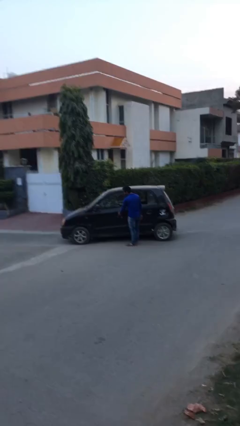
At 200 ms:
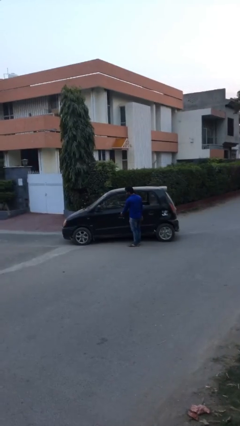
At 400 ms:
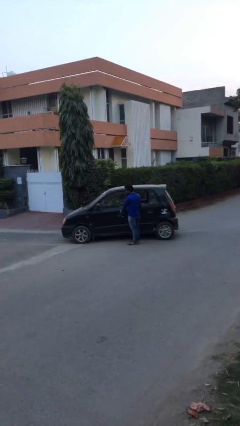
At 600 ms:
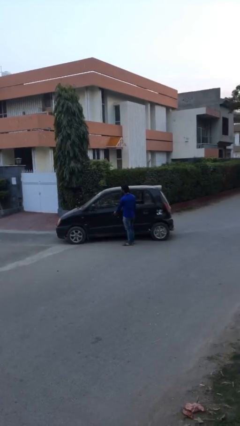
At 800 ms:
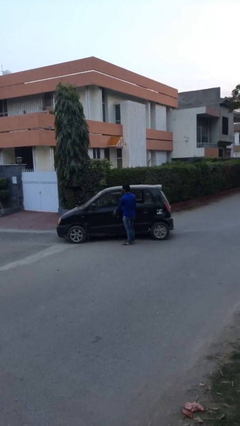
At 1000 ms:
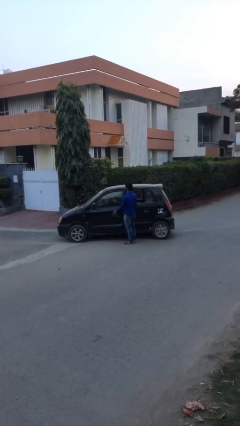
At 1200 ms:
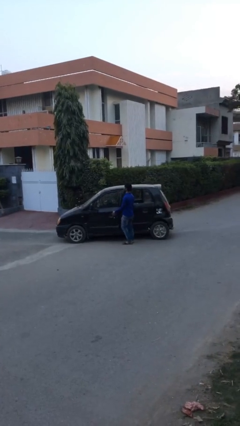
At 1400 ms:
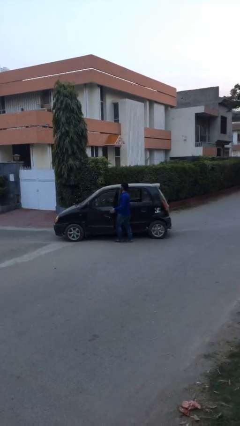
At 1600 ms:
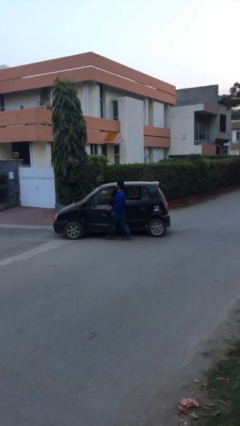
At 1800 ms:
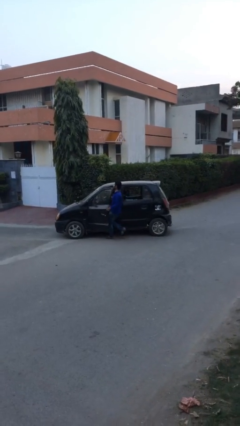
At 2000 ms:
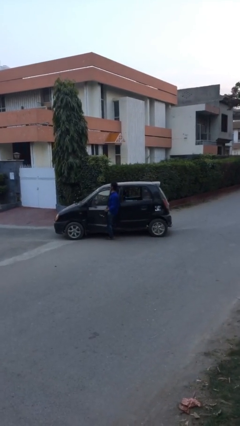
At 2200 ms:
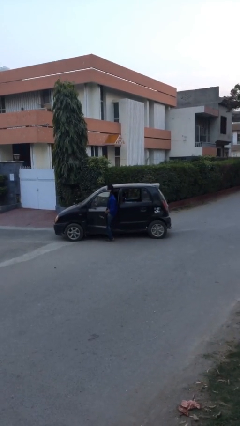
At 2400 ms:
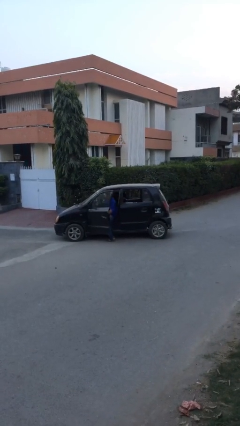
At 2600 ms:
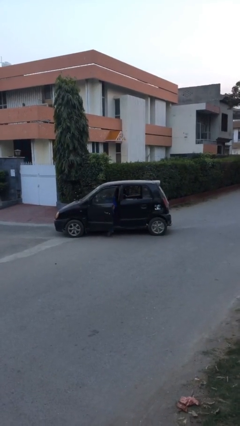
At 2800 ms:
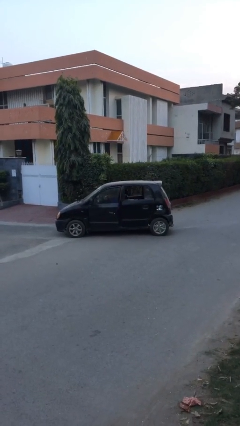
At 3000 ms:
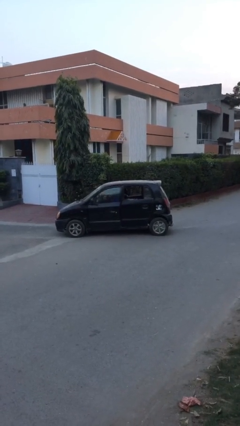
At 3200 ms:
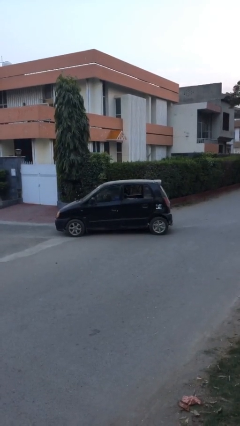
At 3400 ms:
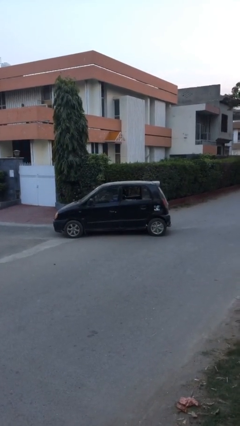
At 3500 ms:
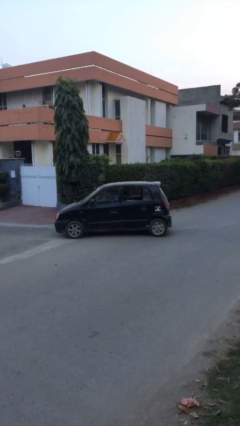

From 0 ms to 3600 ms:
car picks up person

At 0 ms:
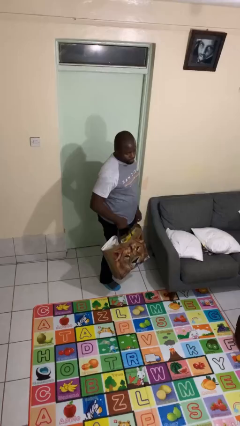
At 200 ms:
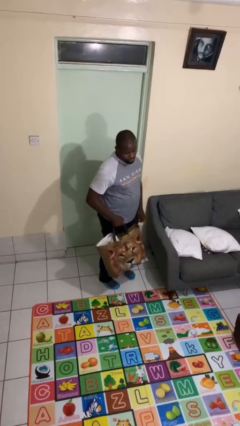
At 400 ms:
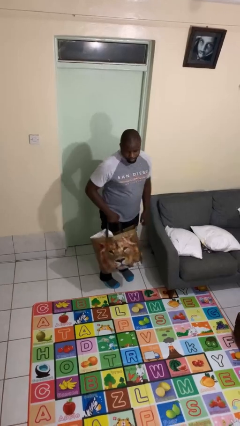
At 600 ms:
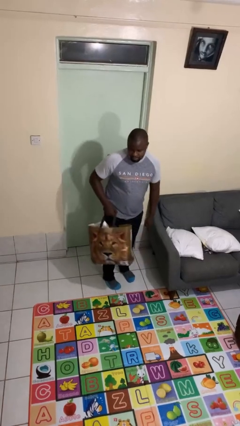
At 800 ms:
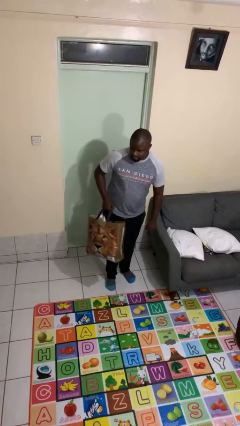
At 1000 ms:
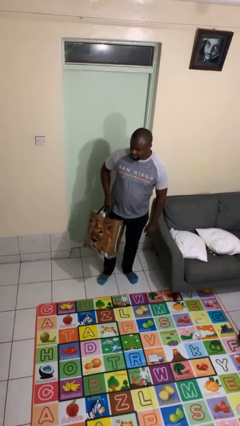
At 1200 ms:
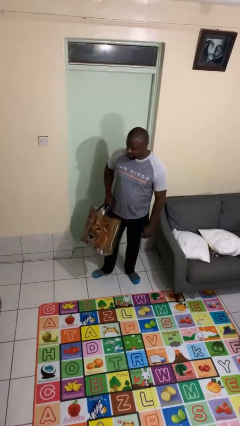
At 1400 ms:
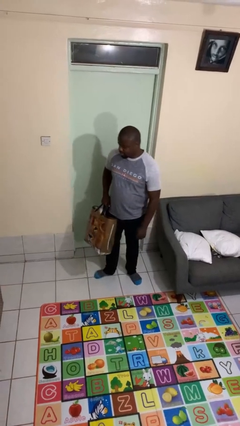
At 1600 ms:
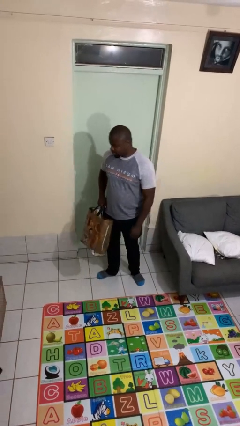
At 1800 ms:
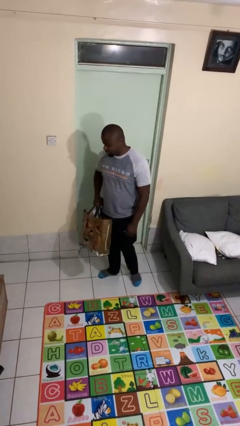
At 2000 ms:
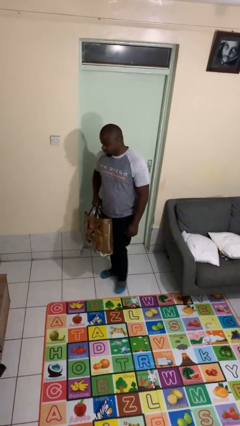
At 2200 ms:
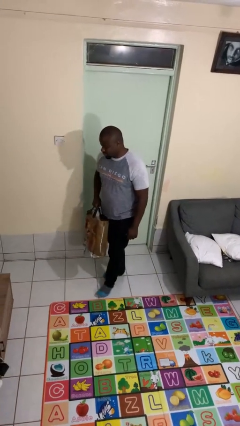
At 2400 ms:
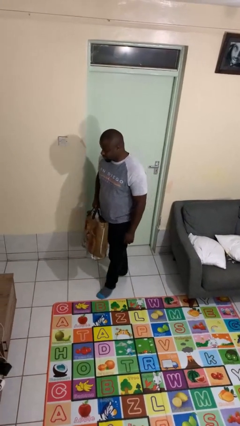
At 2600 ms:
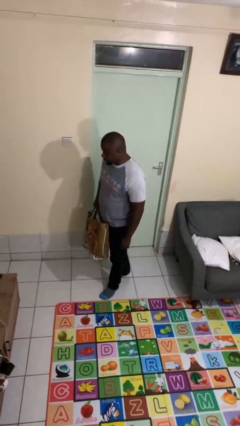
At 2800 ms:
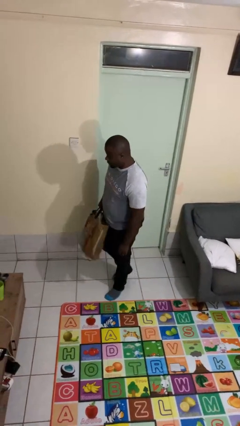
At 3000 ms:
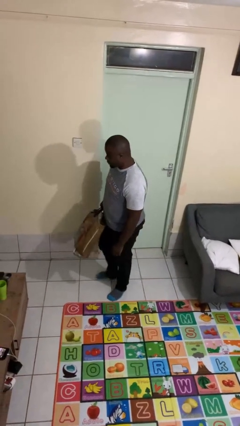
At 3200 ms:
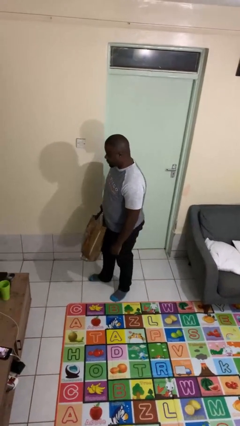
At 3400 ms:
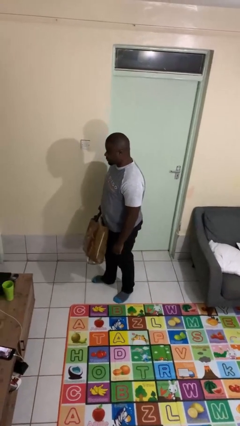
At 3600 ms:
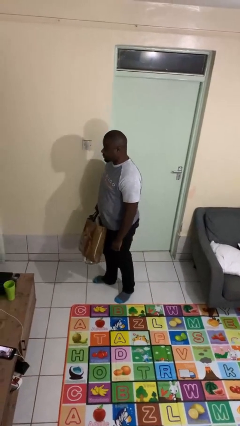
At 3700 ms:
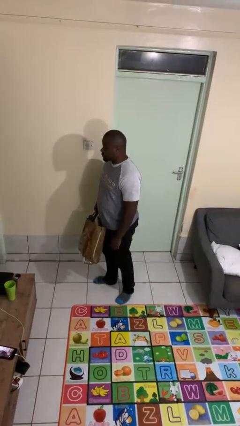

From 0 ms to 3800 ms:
person carries groceries

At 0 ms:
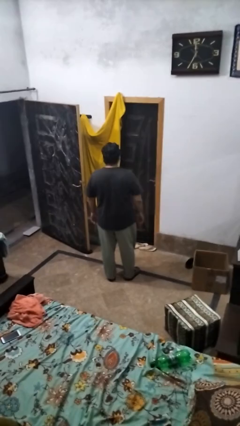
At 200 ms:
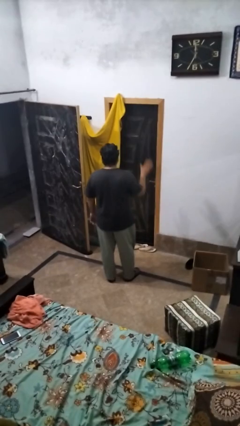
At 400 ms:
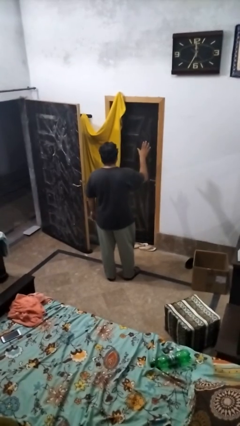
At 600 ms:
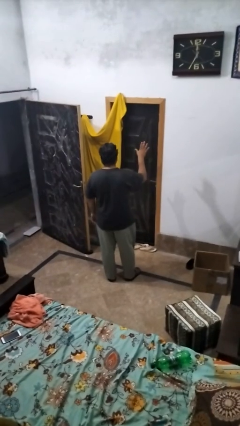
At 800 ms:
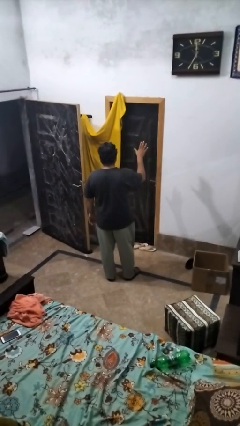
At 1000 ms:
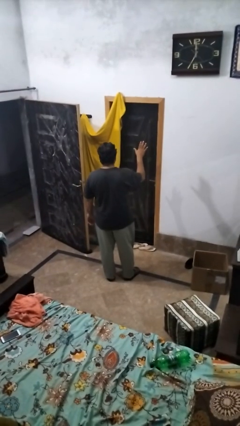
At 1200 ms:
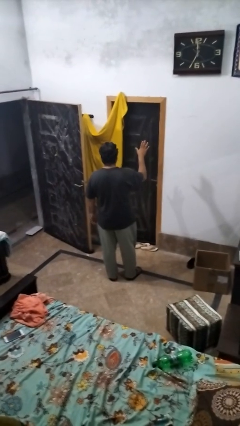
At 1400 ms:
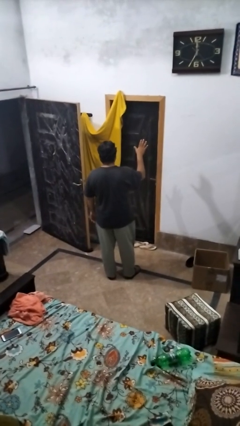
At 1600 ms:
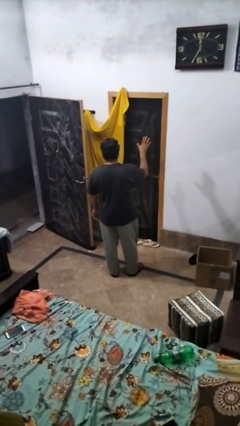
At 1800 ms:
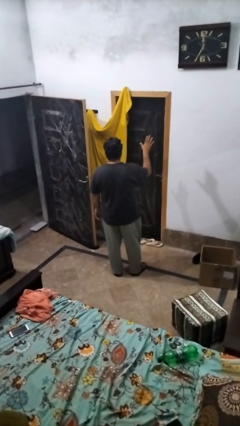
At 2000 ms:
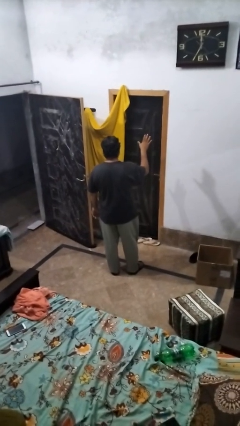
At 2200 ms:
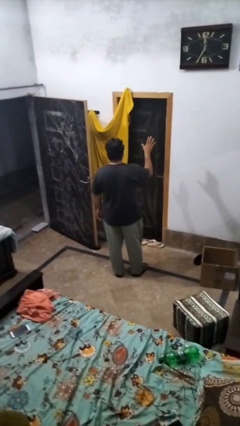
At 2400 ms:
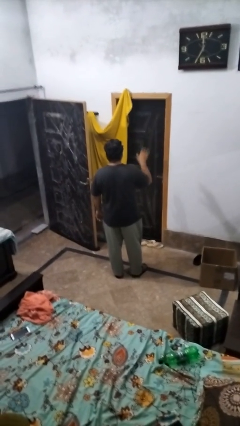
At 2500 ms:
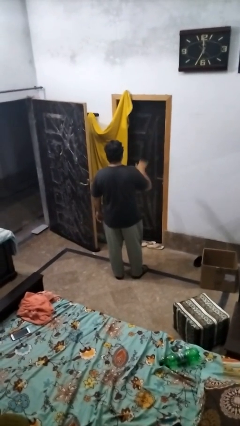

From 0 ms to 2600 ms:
person gestures stop

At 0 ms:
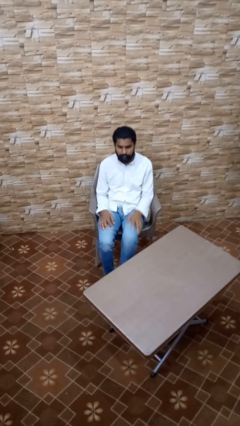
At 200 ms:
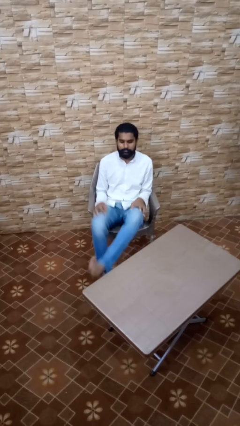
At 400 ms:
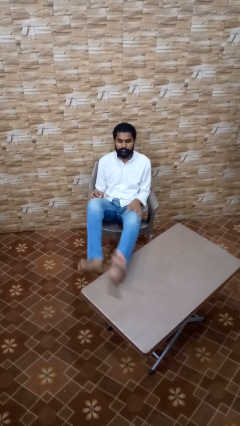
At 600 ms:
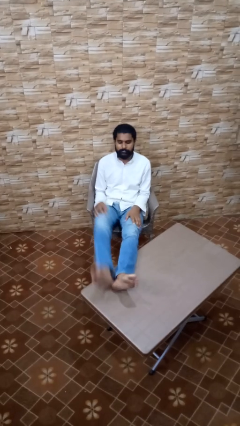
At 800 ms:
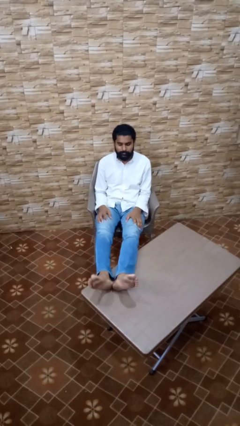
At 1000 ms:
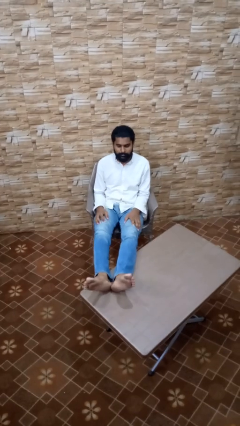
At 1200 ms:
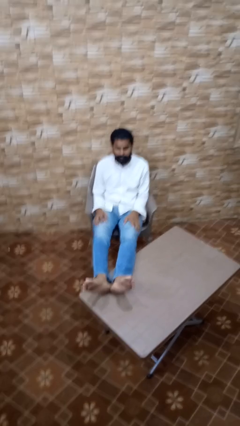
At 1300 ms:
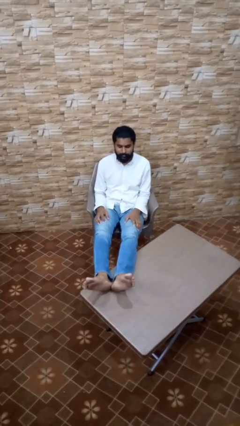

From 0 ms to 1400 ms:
person puts feet up

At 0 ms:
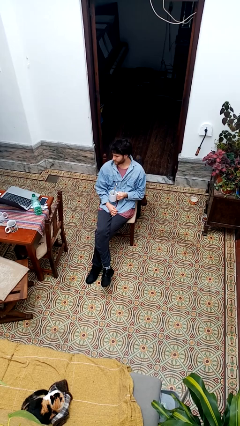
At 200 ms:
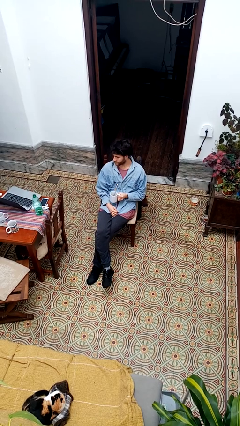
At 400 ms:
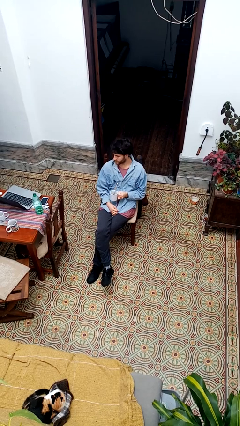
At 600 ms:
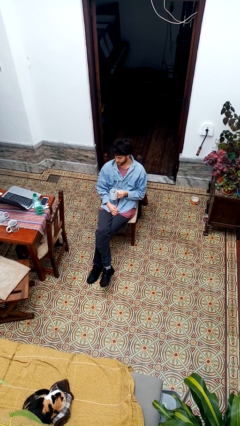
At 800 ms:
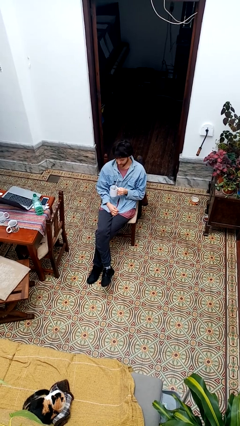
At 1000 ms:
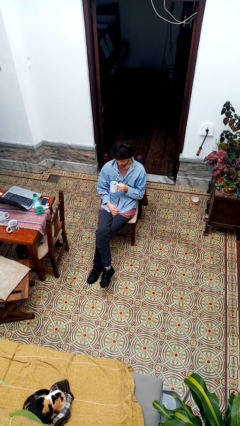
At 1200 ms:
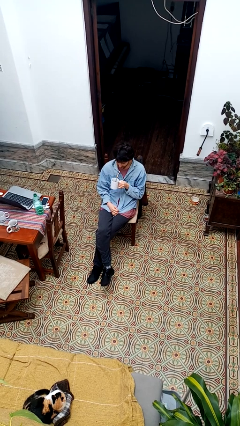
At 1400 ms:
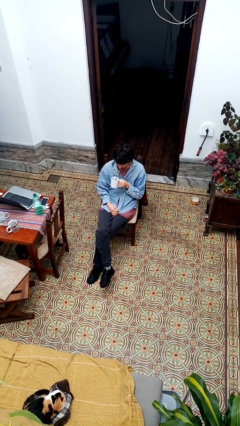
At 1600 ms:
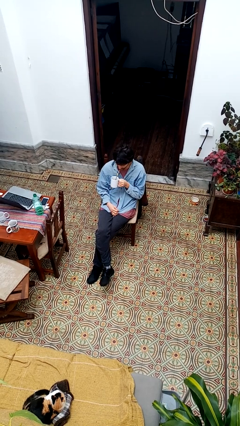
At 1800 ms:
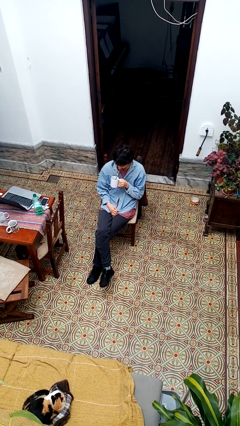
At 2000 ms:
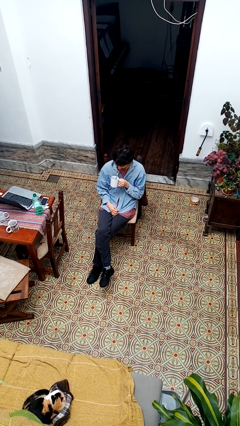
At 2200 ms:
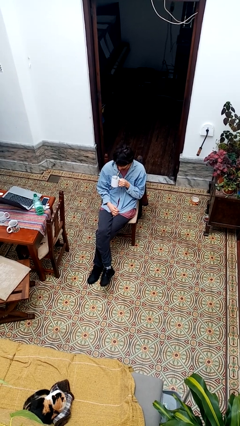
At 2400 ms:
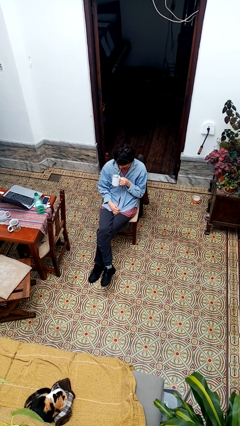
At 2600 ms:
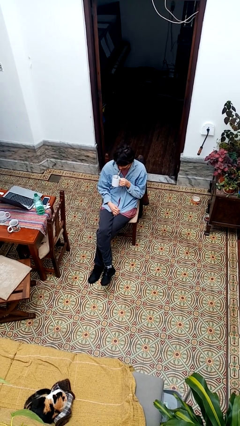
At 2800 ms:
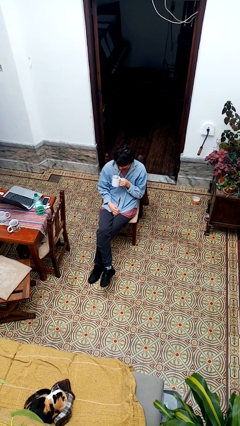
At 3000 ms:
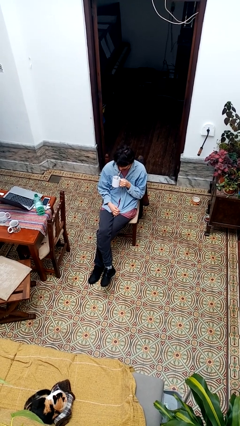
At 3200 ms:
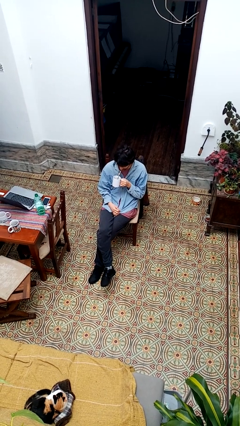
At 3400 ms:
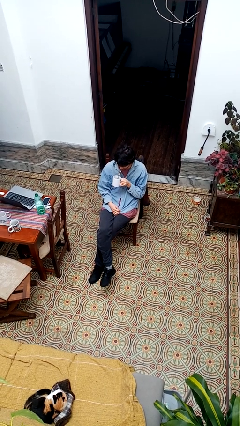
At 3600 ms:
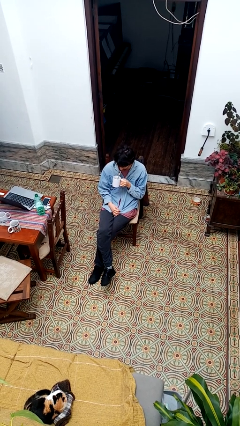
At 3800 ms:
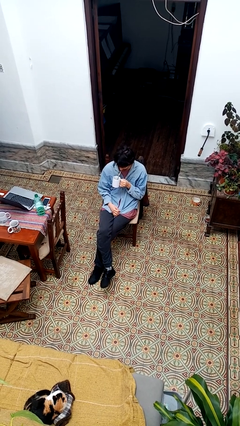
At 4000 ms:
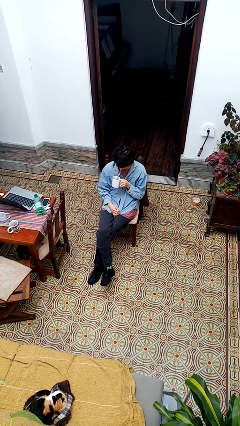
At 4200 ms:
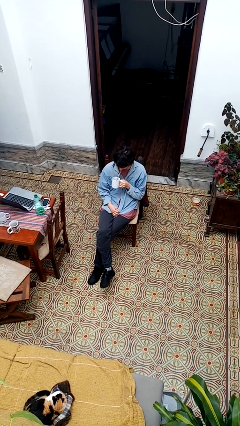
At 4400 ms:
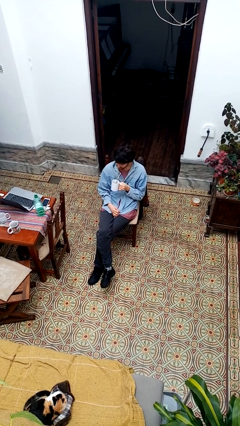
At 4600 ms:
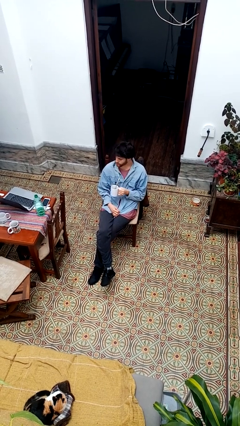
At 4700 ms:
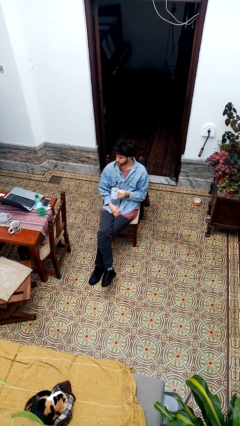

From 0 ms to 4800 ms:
person drinks from straw

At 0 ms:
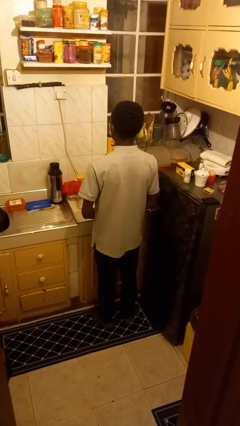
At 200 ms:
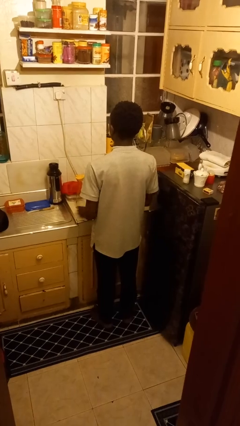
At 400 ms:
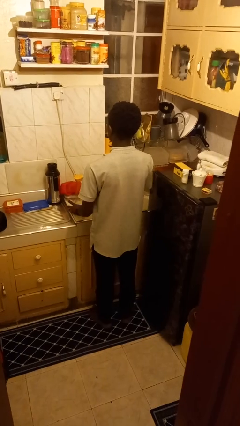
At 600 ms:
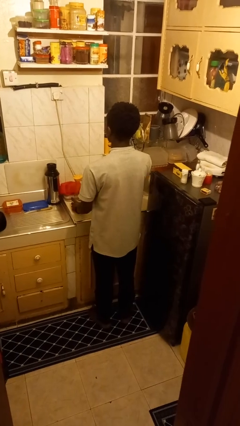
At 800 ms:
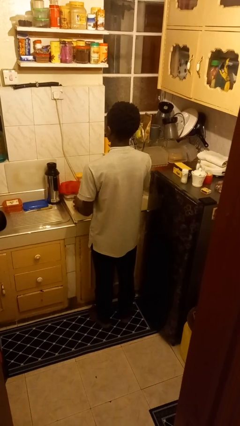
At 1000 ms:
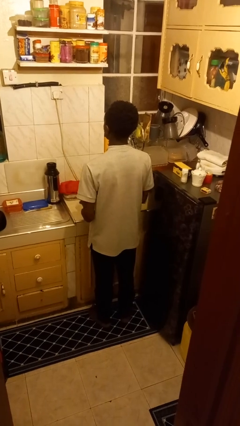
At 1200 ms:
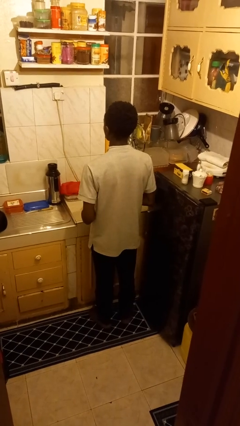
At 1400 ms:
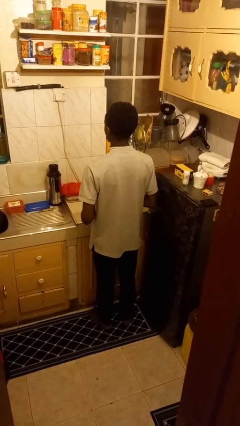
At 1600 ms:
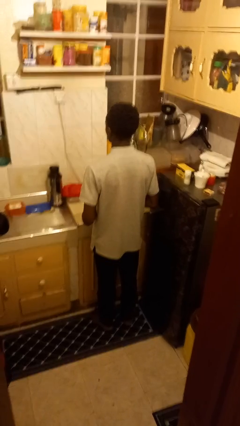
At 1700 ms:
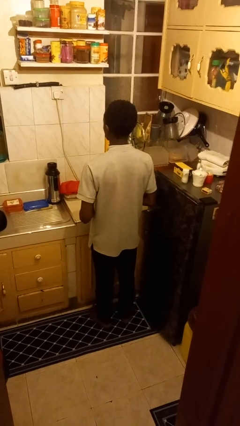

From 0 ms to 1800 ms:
person picks up object from countertop
